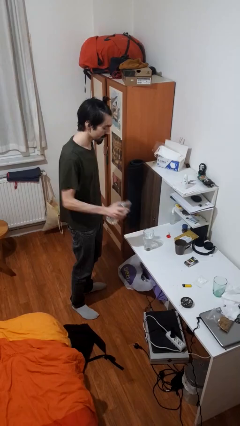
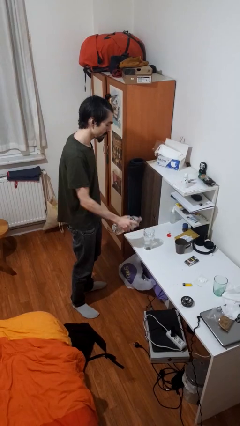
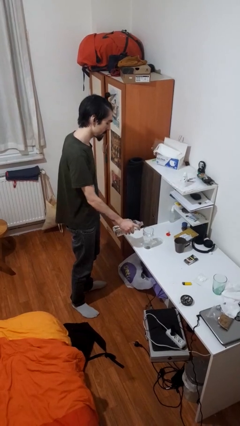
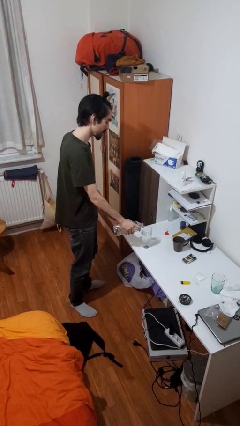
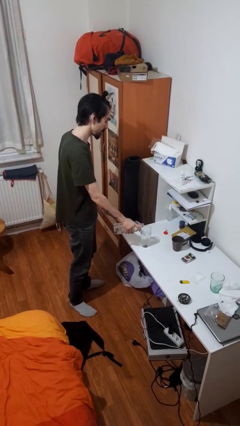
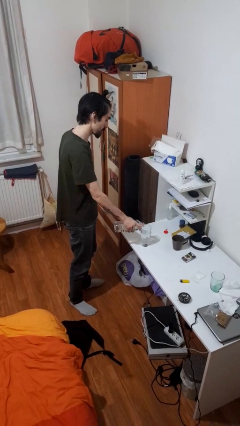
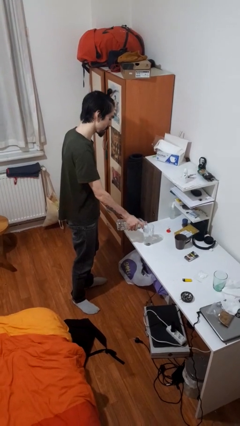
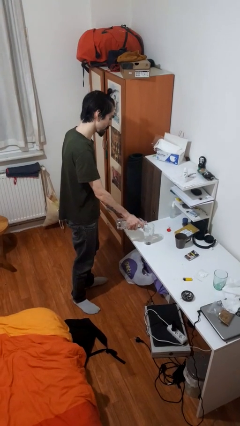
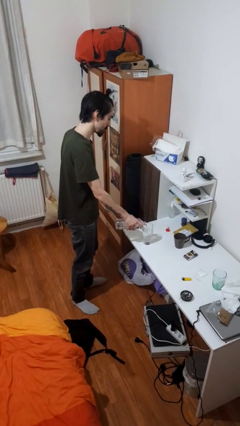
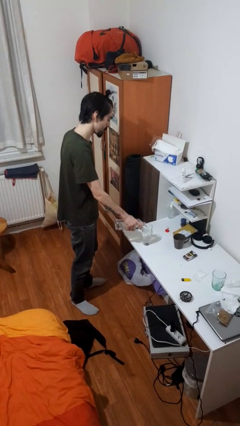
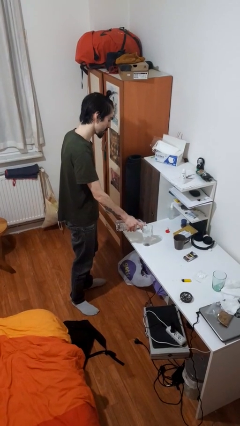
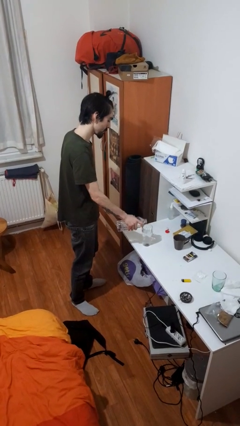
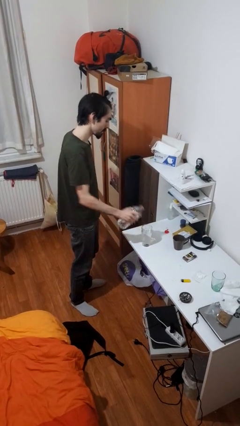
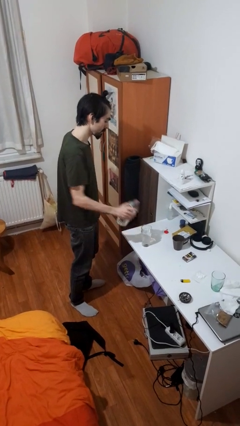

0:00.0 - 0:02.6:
person pours liquid into cup

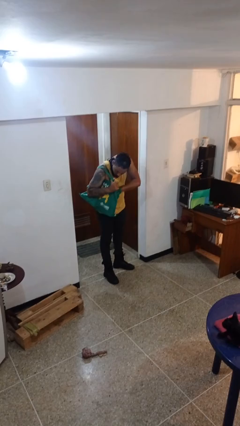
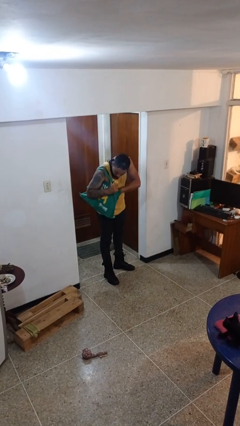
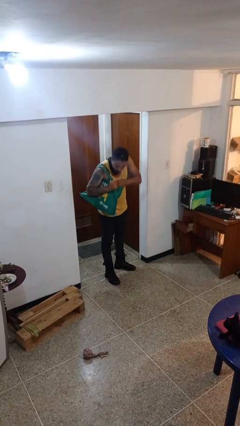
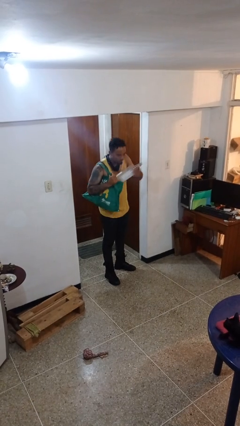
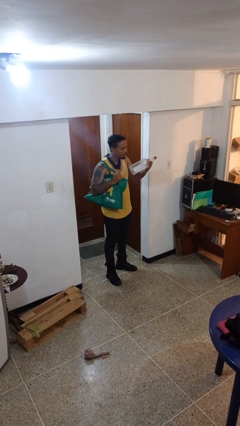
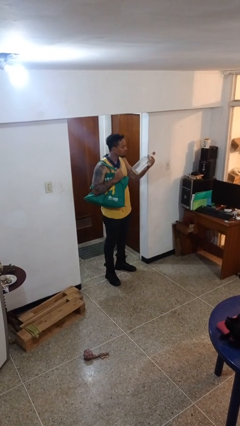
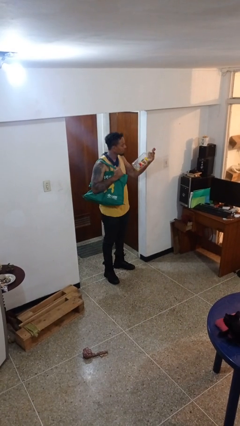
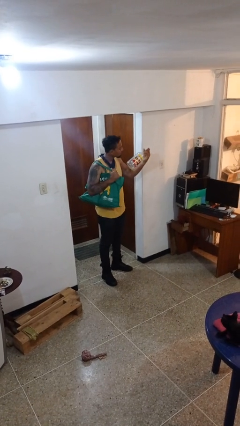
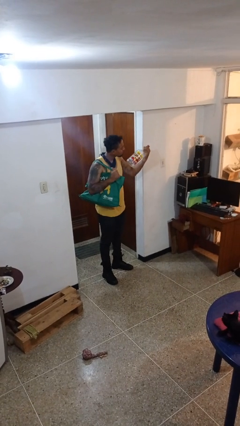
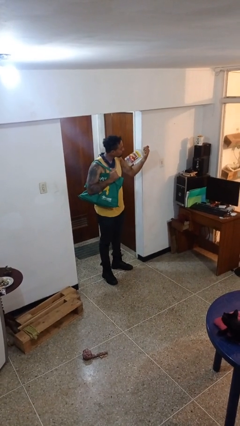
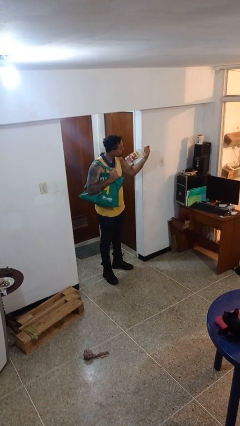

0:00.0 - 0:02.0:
person takes object from purse

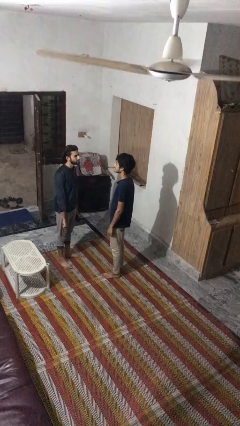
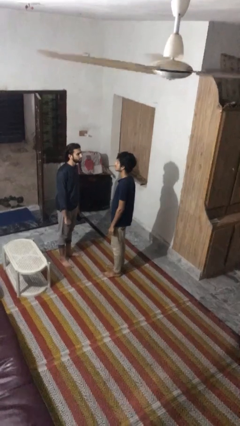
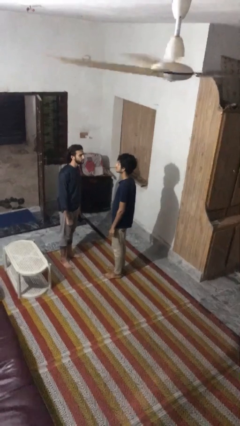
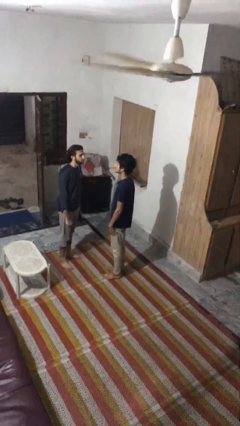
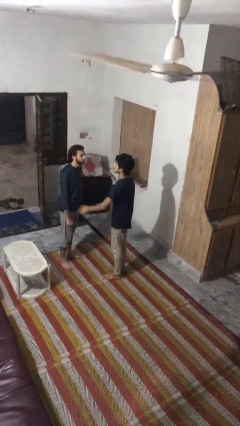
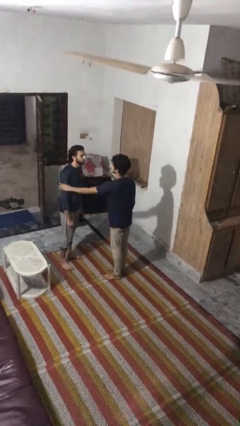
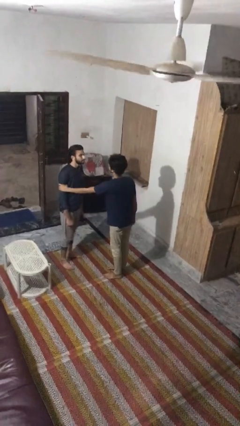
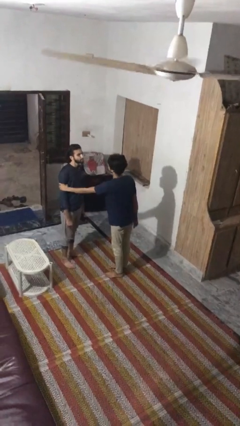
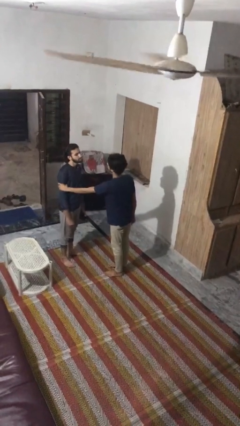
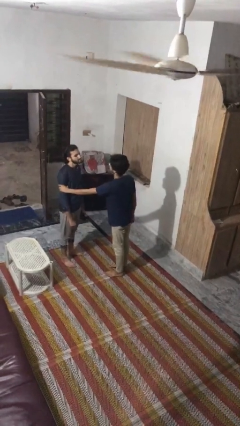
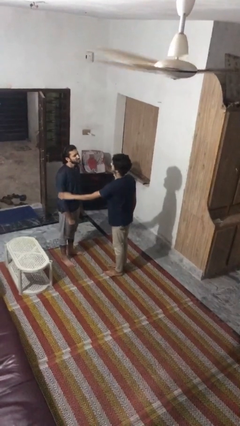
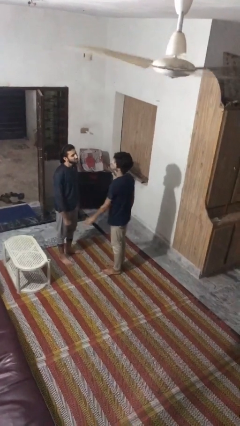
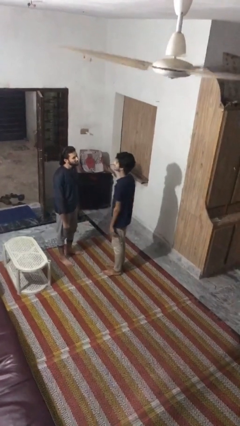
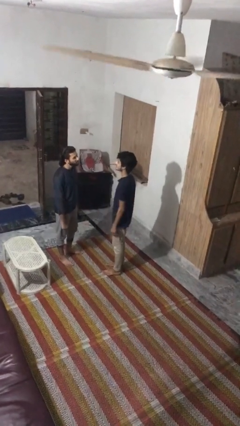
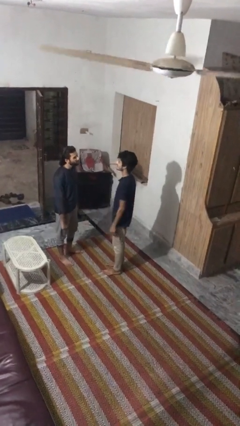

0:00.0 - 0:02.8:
person grabs person by bicep

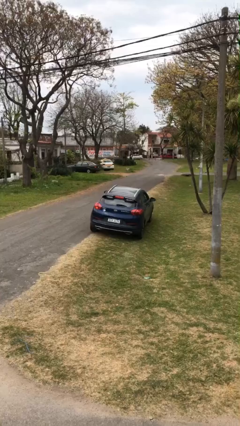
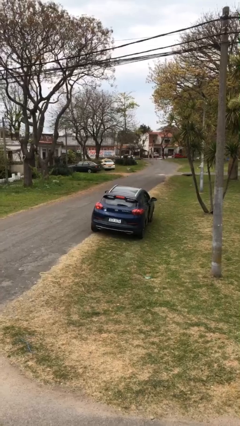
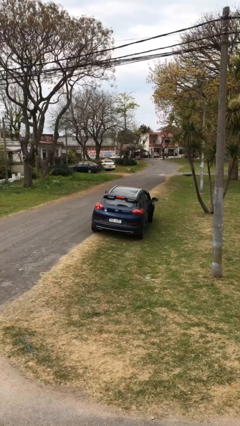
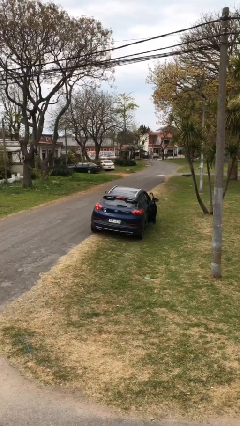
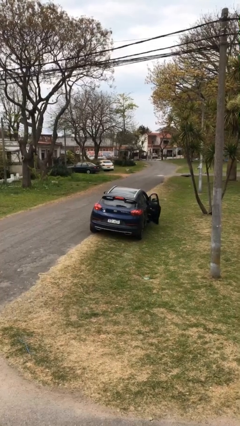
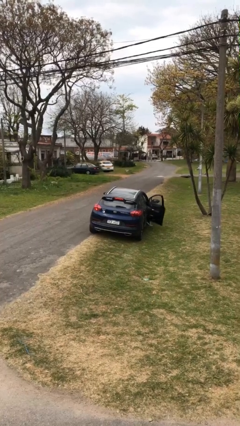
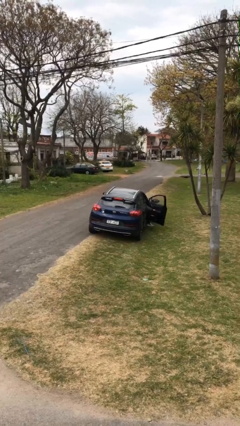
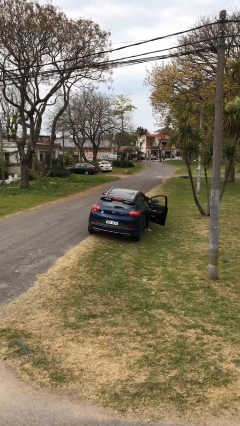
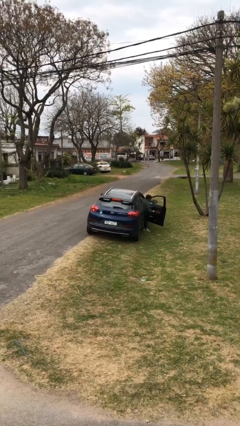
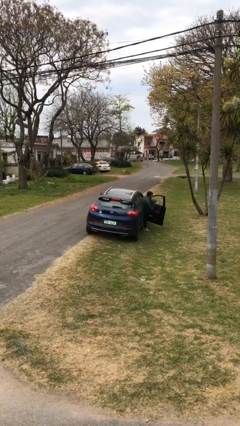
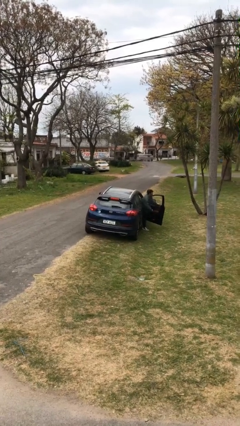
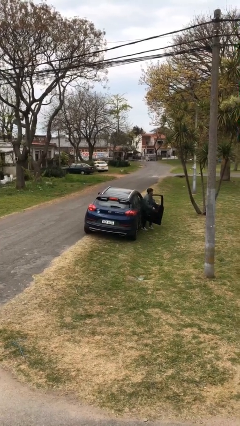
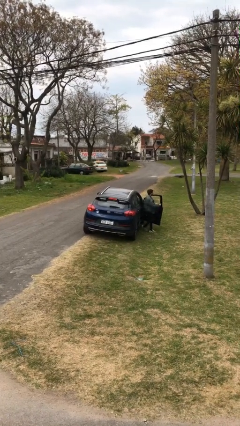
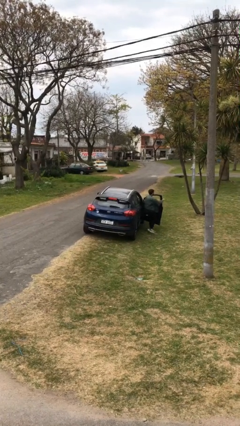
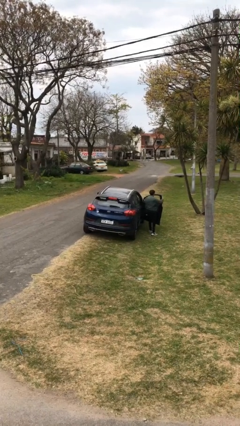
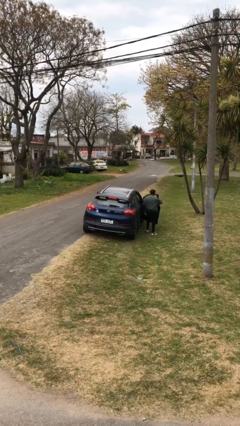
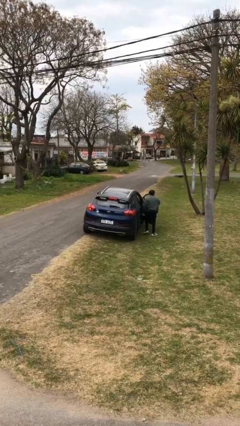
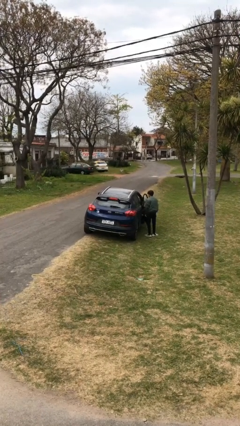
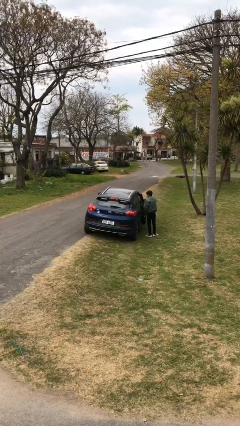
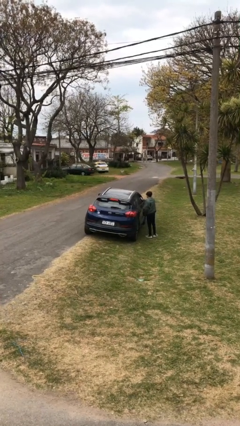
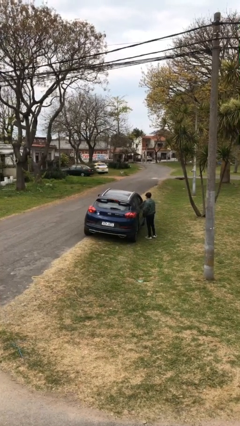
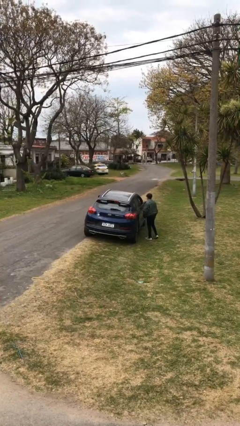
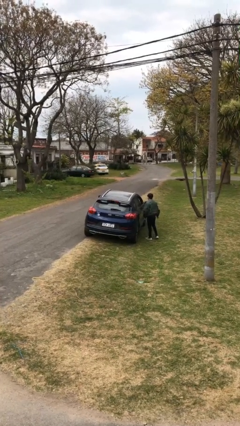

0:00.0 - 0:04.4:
car drops off person

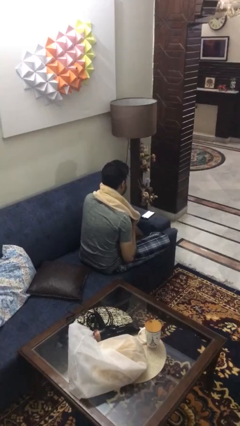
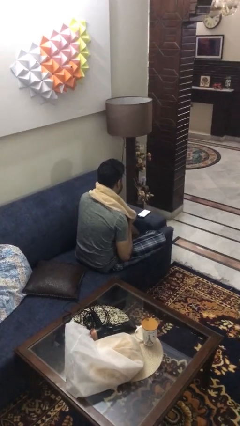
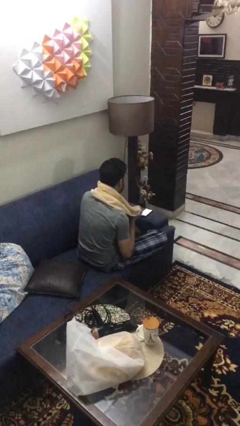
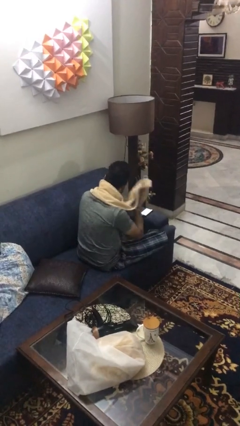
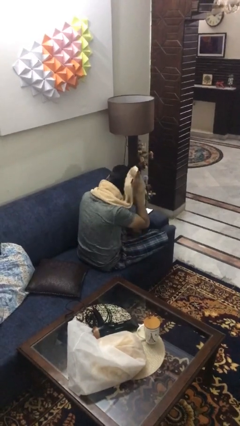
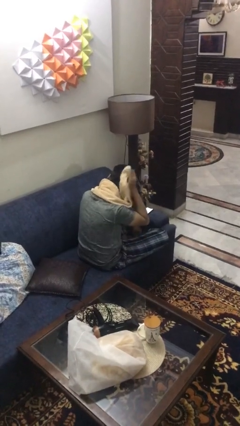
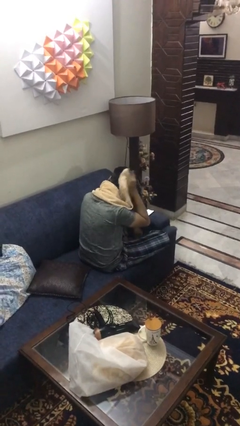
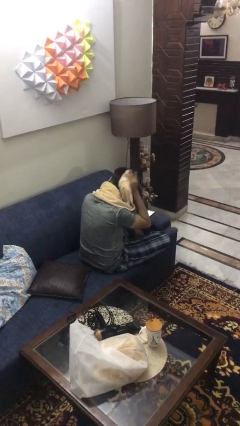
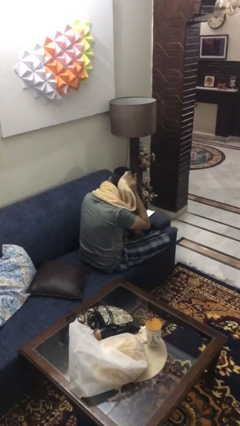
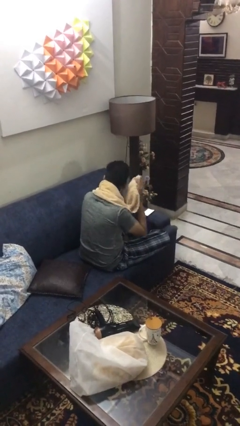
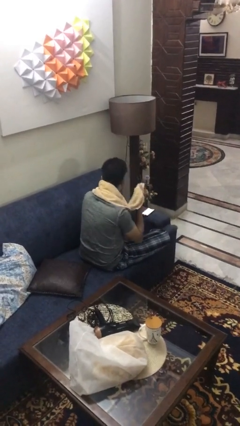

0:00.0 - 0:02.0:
person dries hair with towel

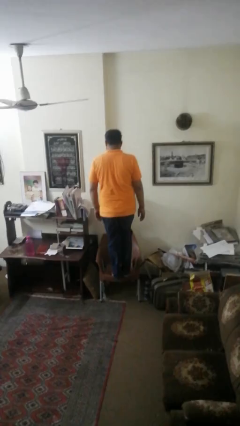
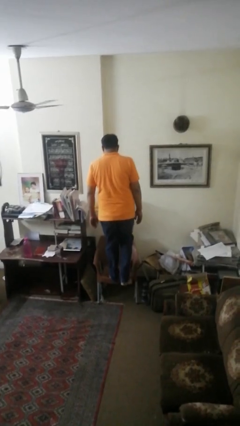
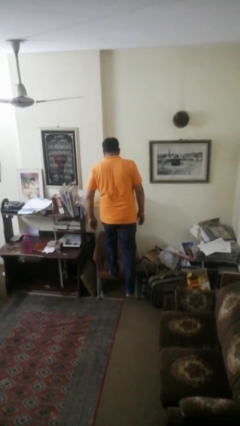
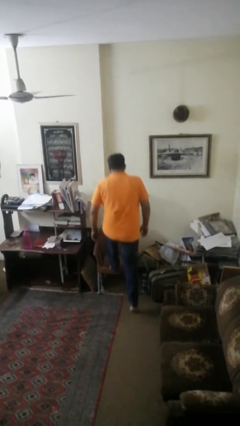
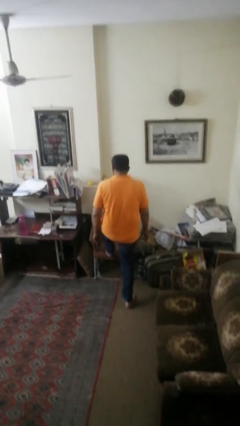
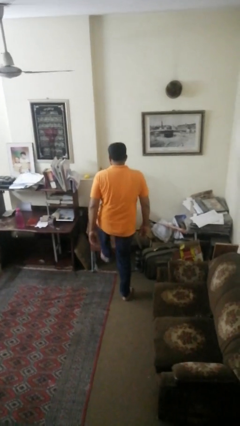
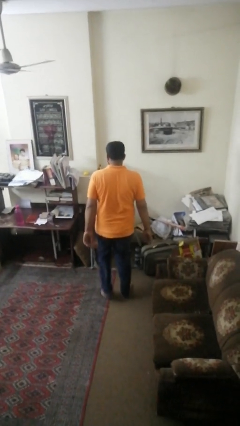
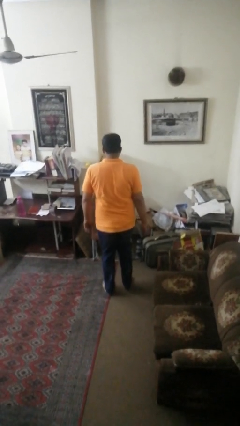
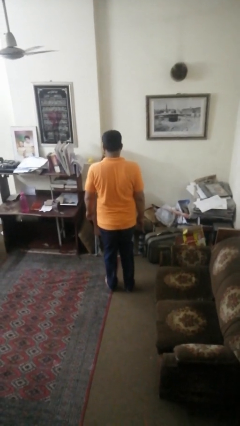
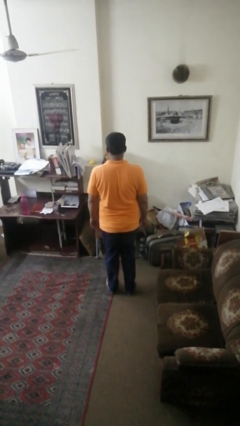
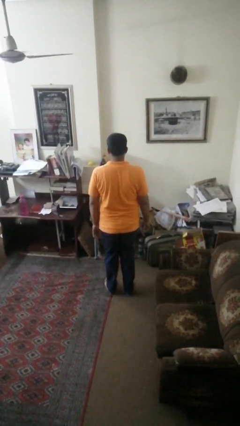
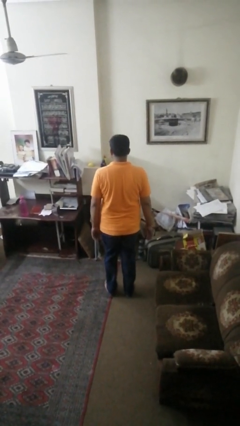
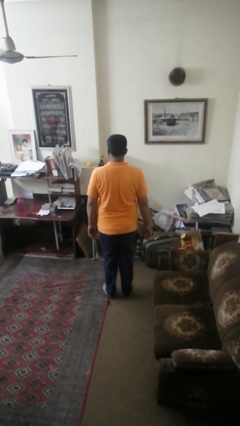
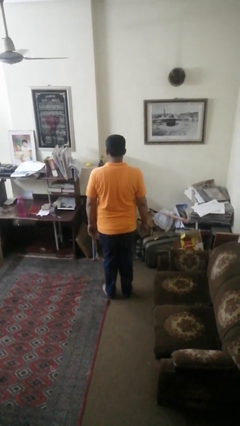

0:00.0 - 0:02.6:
person climbs off chair

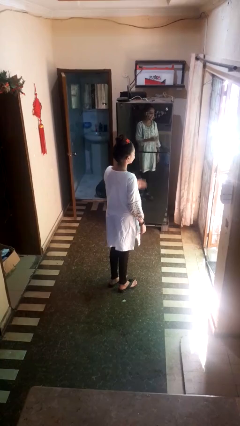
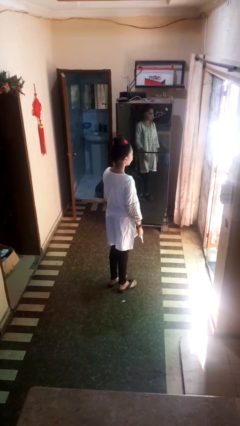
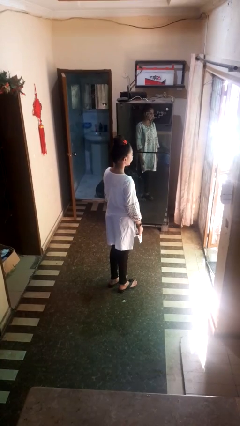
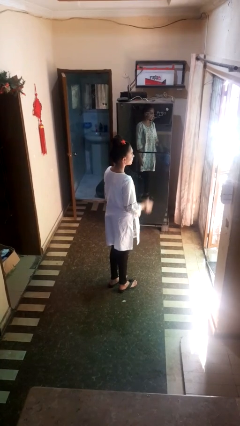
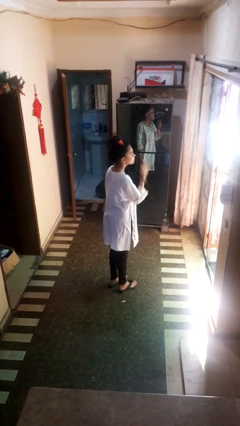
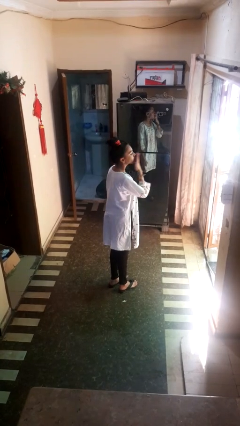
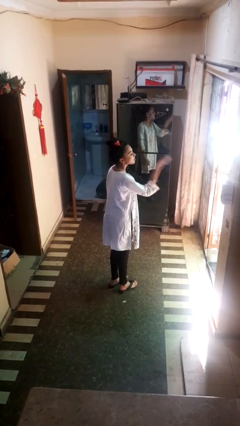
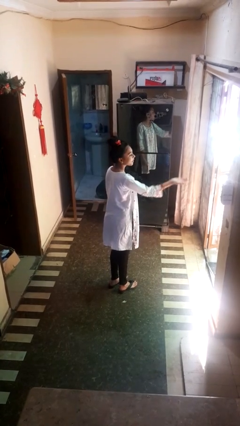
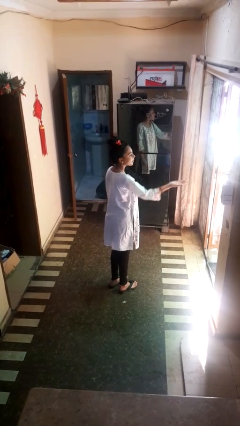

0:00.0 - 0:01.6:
person gestures blow kiss
